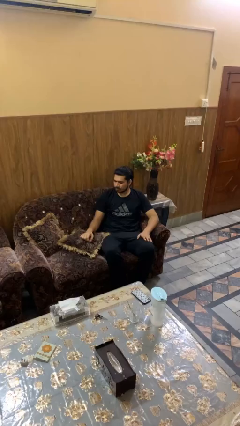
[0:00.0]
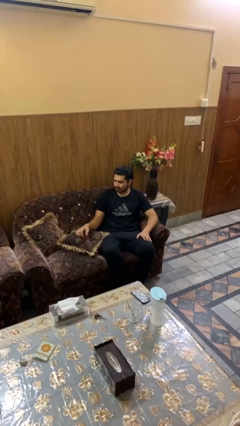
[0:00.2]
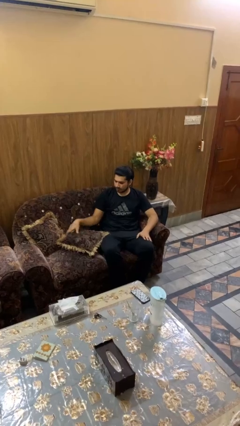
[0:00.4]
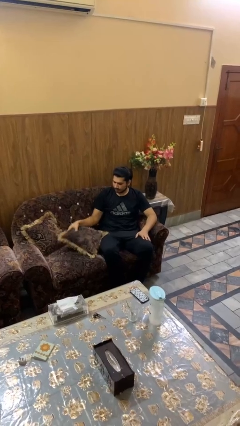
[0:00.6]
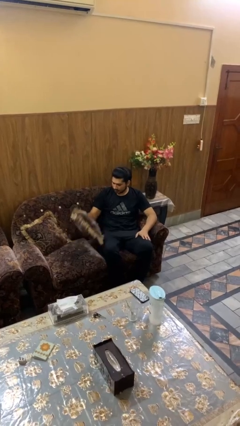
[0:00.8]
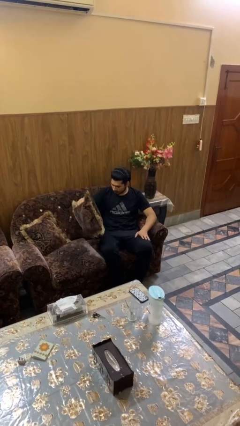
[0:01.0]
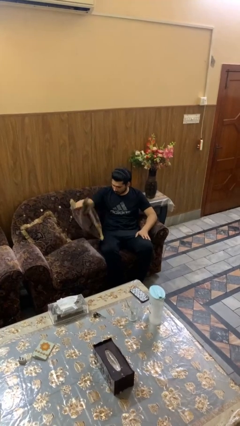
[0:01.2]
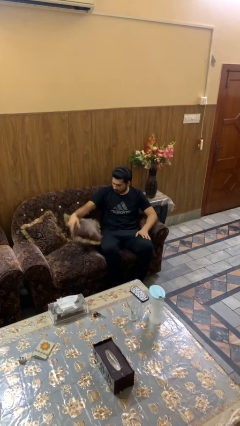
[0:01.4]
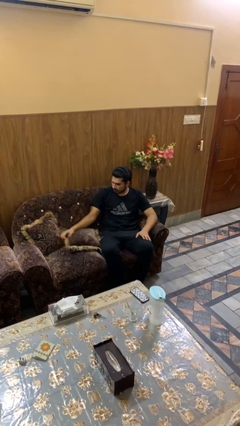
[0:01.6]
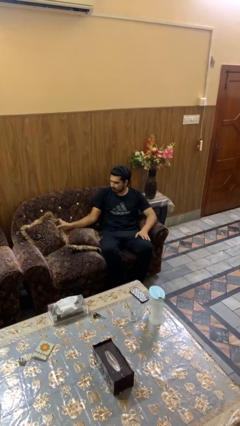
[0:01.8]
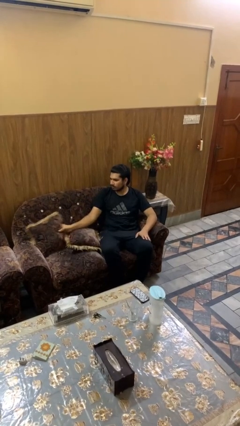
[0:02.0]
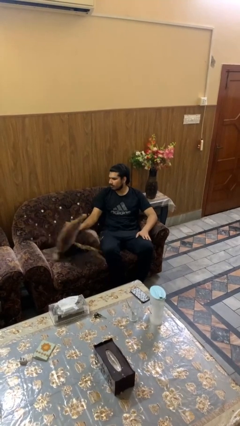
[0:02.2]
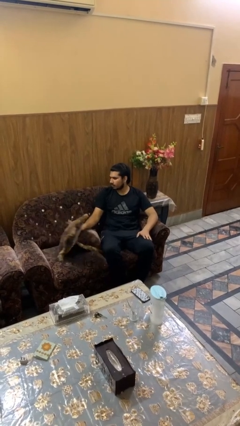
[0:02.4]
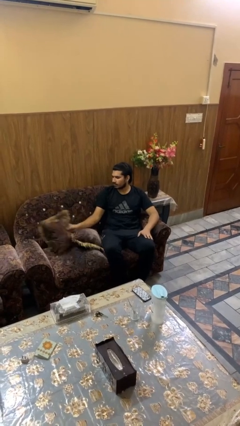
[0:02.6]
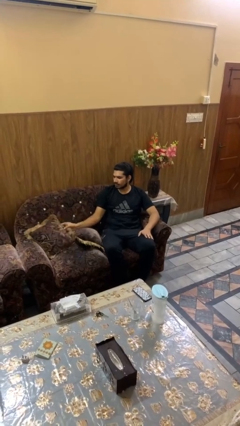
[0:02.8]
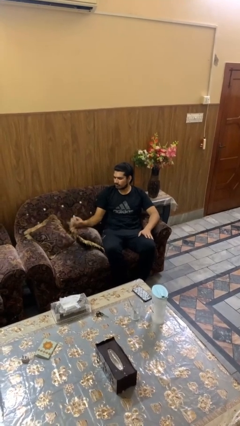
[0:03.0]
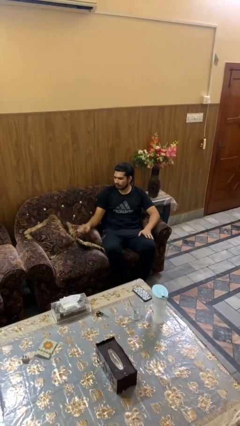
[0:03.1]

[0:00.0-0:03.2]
person searches in couch

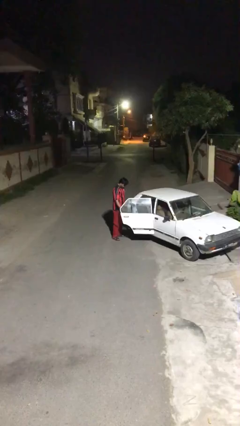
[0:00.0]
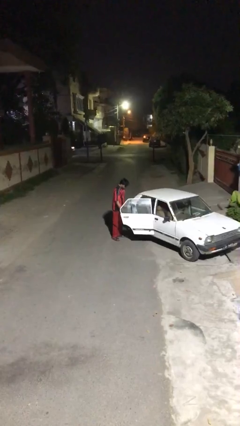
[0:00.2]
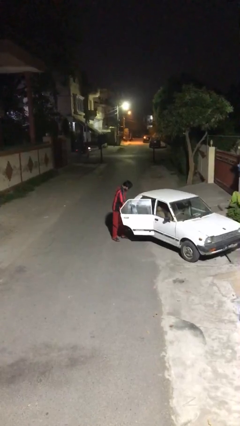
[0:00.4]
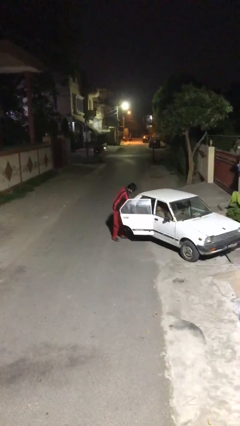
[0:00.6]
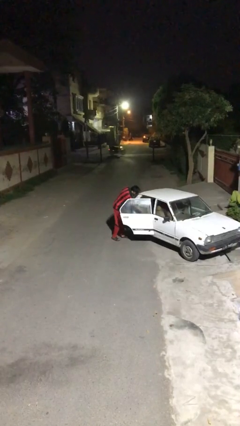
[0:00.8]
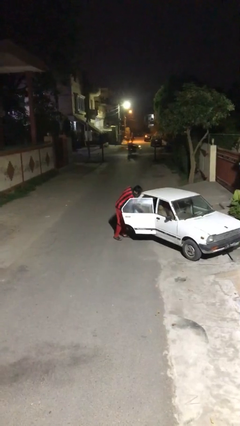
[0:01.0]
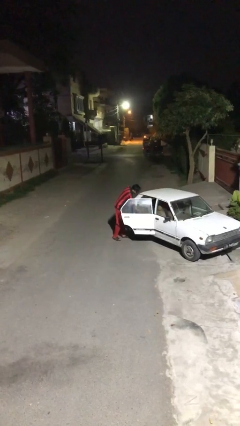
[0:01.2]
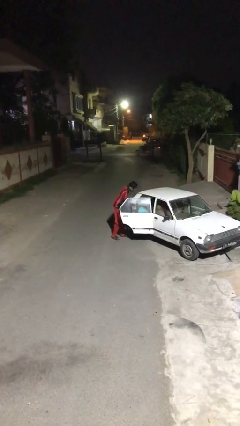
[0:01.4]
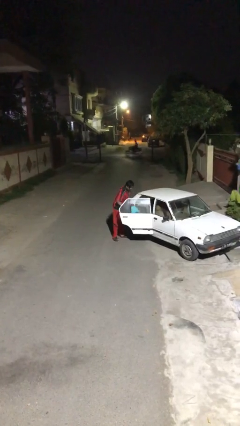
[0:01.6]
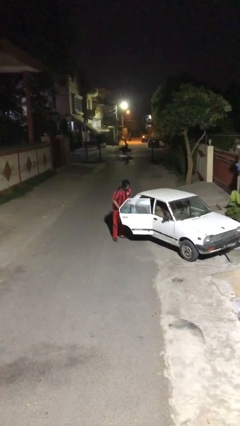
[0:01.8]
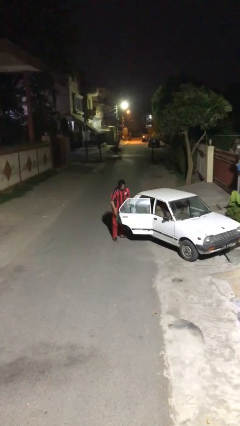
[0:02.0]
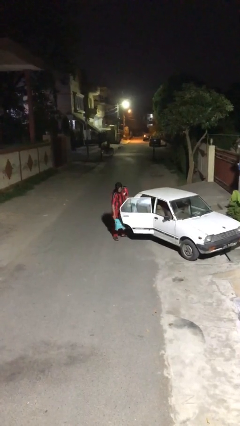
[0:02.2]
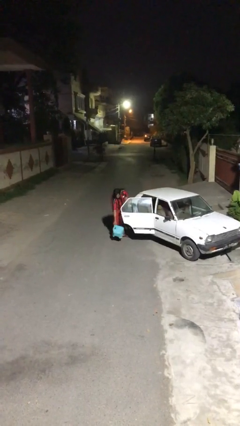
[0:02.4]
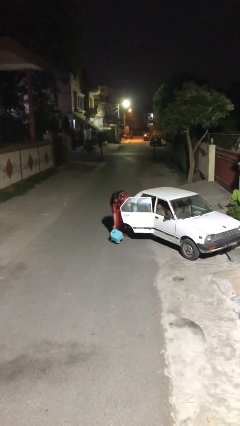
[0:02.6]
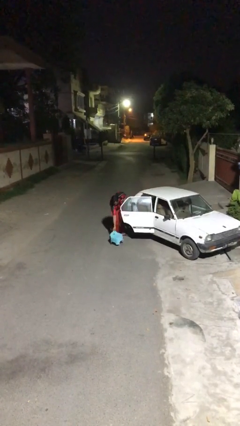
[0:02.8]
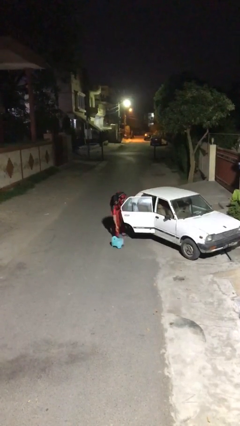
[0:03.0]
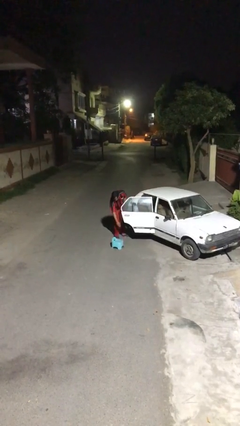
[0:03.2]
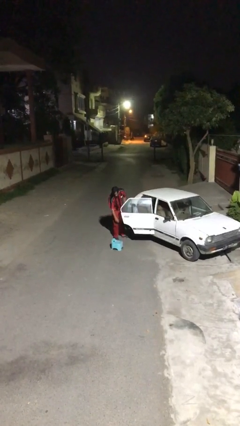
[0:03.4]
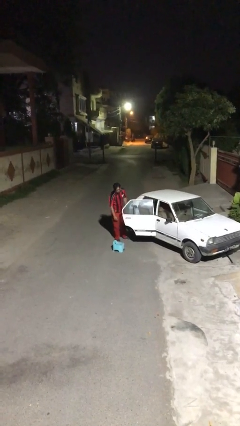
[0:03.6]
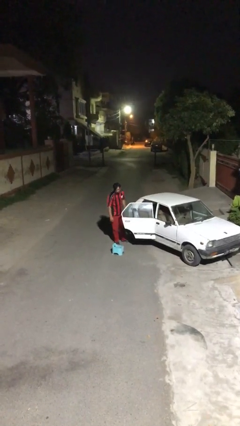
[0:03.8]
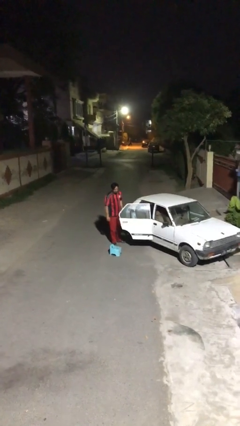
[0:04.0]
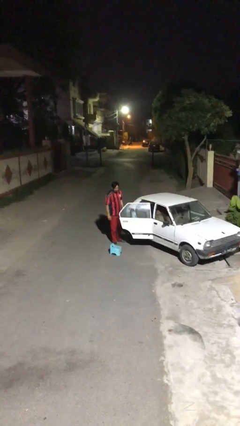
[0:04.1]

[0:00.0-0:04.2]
person unloads car

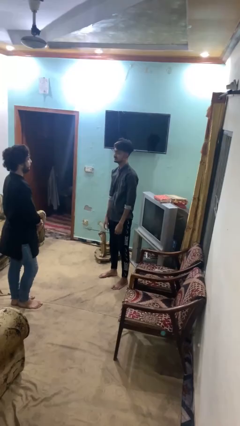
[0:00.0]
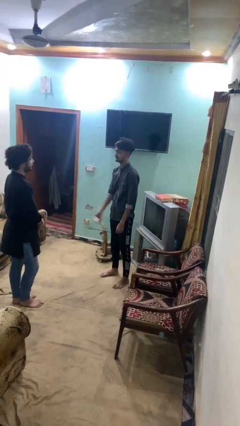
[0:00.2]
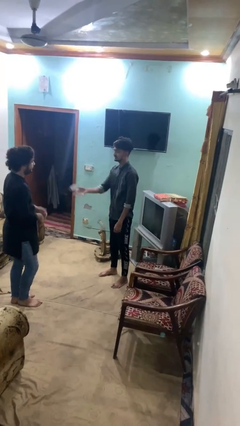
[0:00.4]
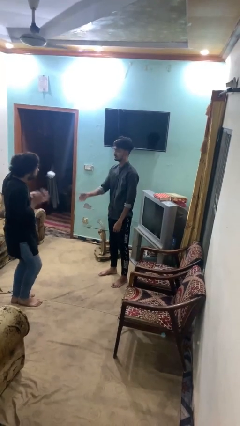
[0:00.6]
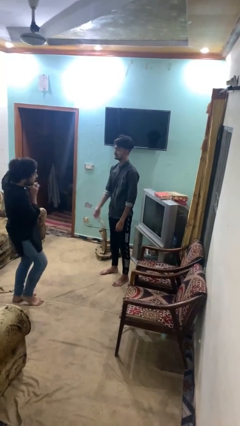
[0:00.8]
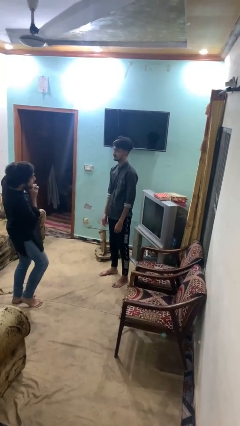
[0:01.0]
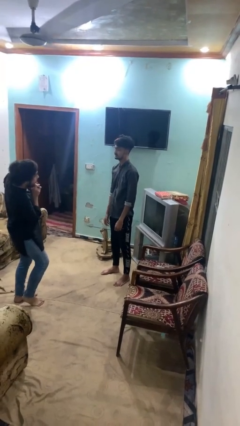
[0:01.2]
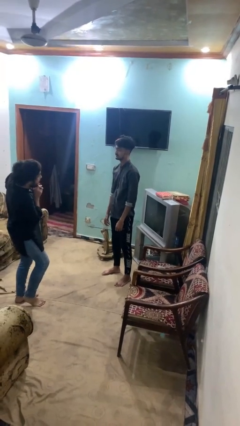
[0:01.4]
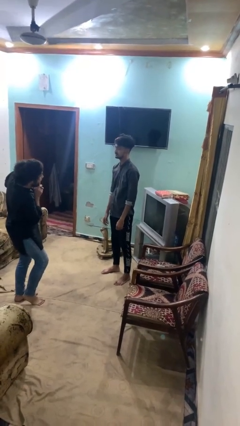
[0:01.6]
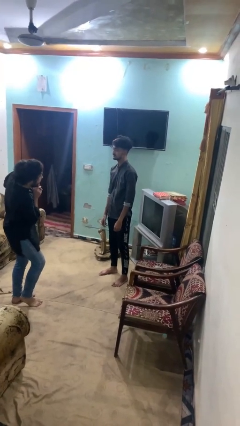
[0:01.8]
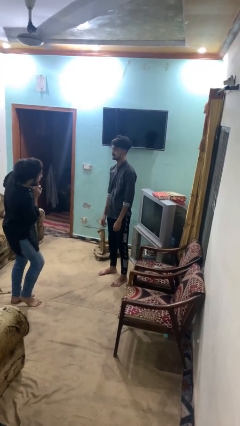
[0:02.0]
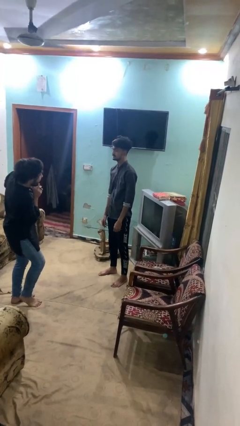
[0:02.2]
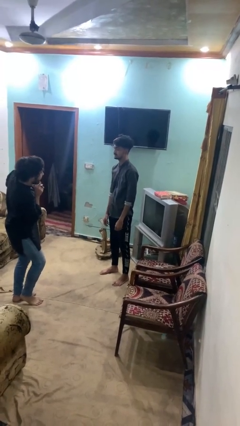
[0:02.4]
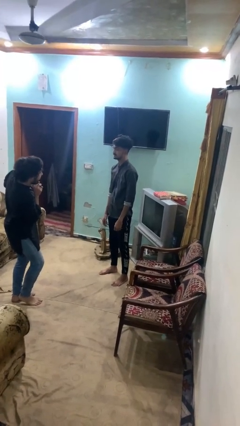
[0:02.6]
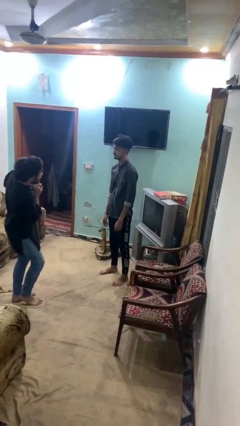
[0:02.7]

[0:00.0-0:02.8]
person throws object to person

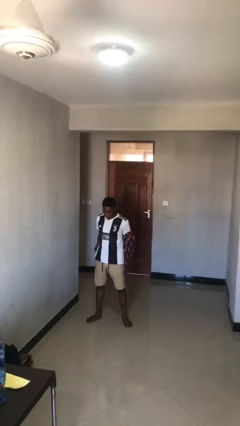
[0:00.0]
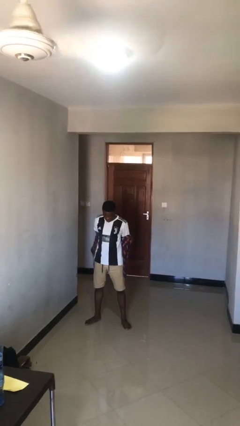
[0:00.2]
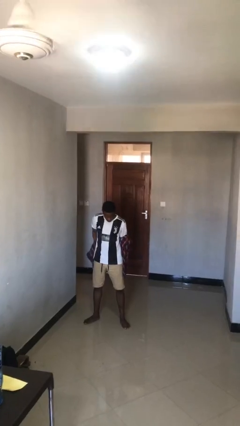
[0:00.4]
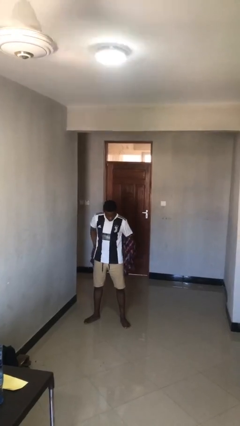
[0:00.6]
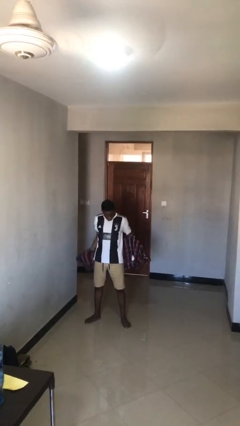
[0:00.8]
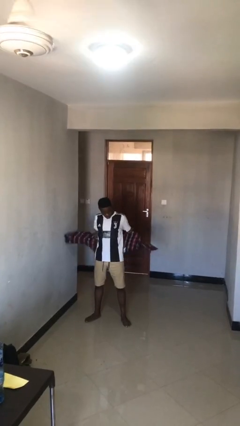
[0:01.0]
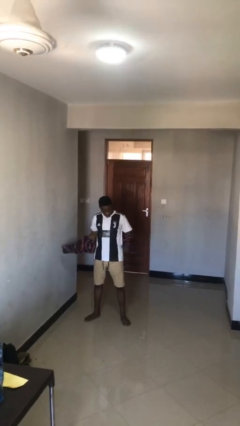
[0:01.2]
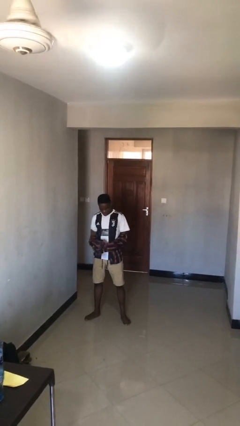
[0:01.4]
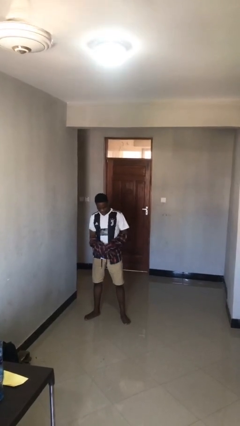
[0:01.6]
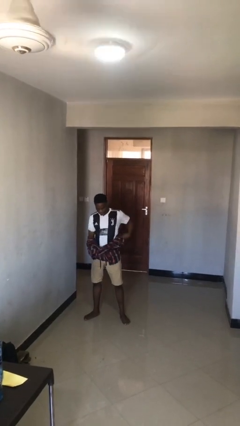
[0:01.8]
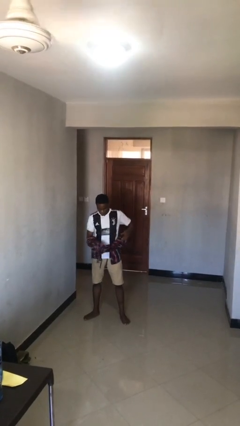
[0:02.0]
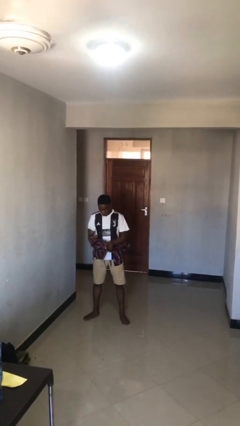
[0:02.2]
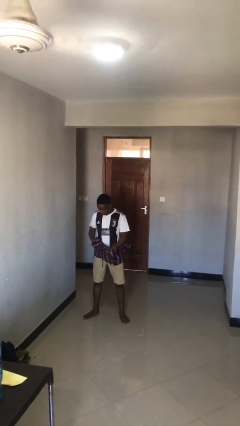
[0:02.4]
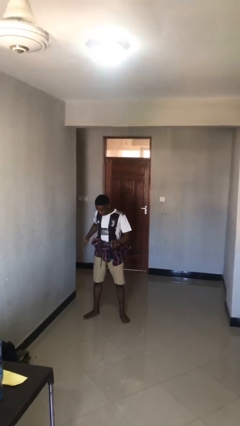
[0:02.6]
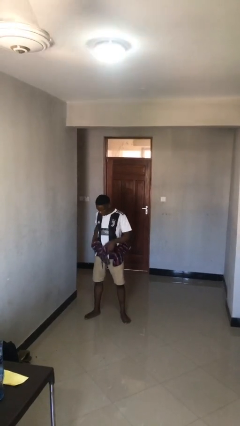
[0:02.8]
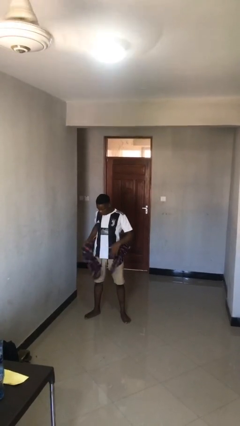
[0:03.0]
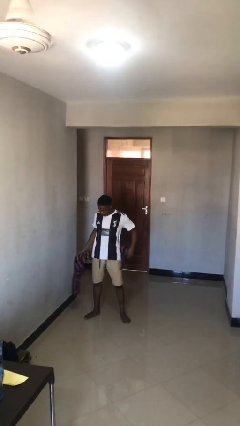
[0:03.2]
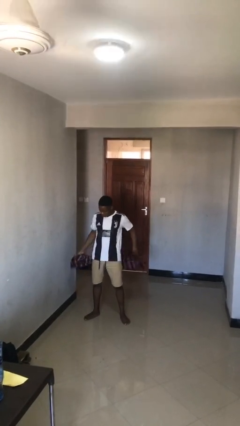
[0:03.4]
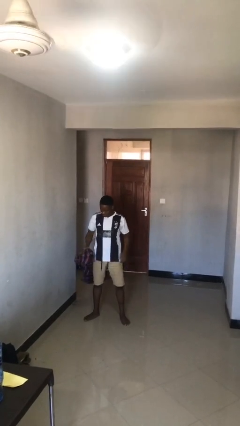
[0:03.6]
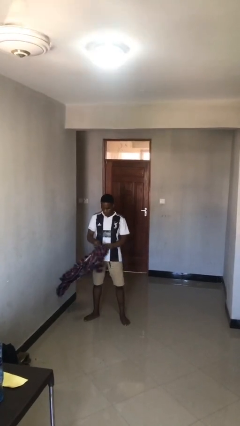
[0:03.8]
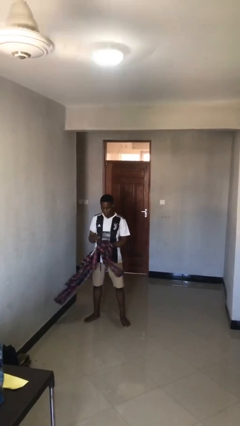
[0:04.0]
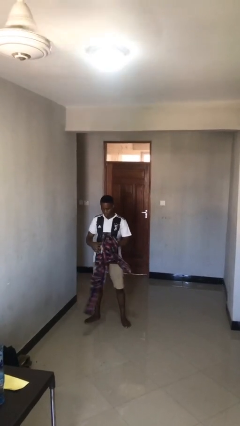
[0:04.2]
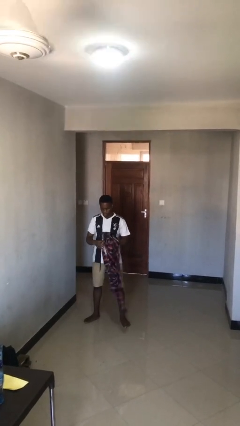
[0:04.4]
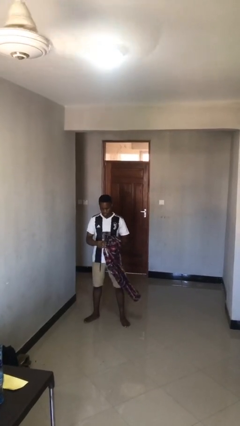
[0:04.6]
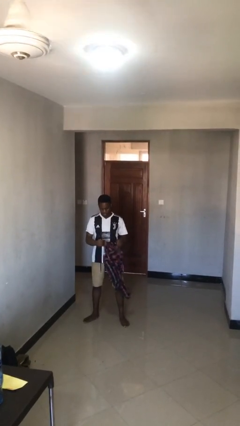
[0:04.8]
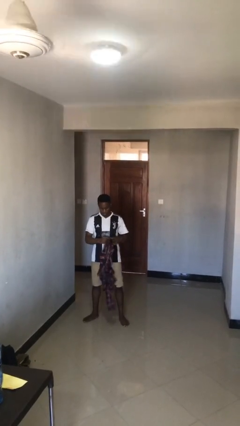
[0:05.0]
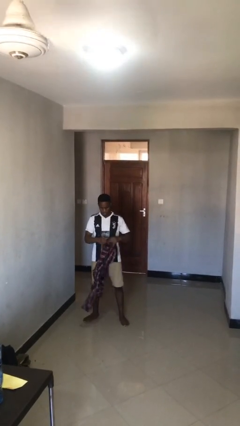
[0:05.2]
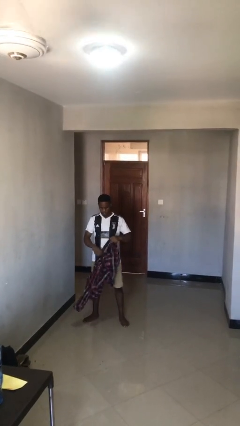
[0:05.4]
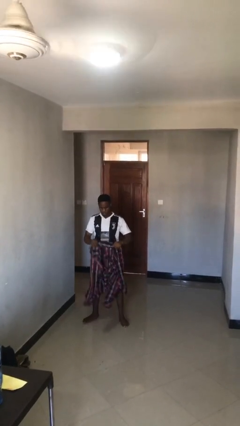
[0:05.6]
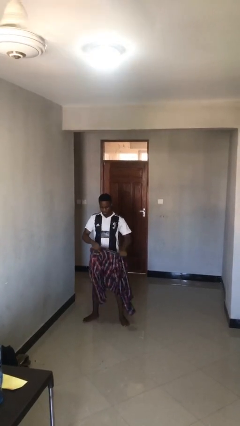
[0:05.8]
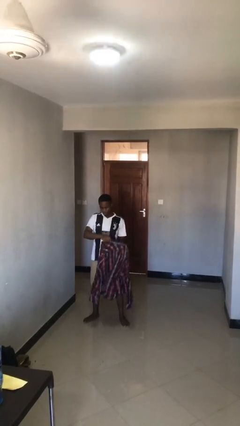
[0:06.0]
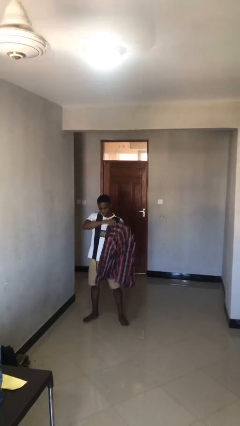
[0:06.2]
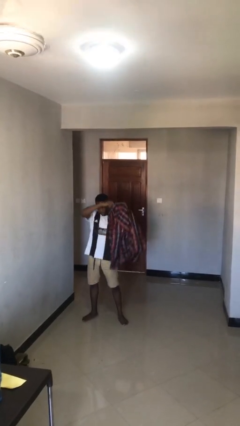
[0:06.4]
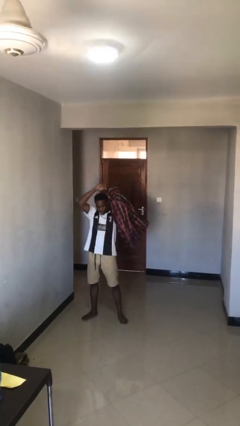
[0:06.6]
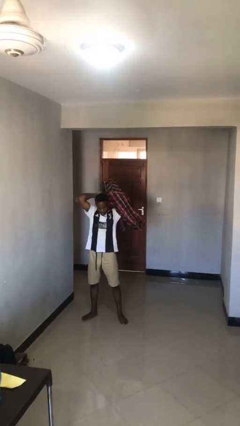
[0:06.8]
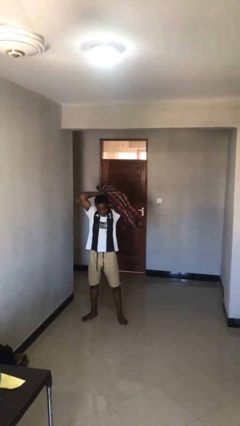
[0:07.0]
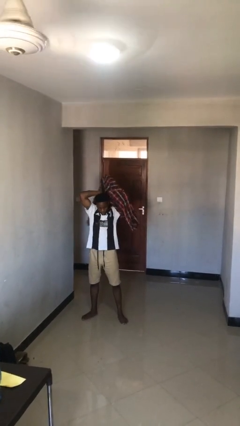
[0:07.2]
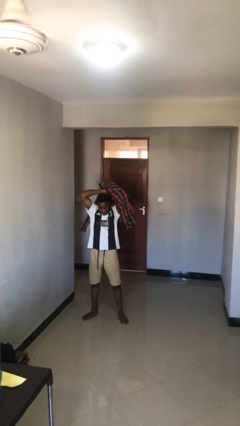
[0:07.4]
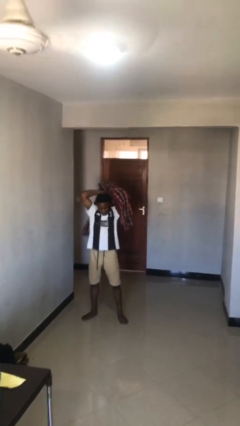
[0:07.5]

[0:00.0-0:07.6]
person takes off shirt
